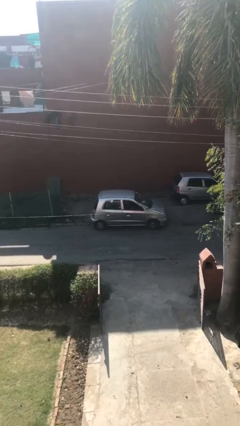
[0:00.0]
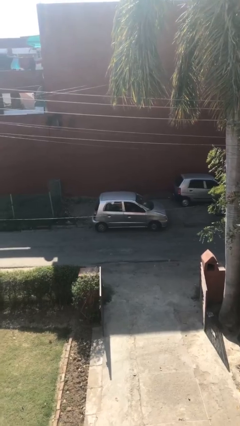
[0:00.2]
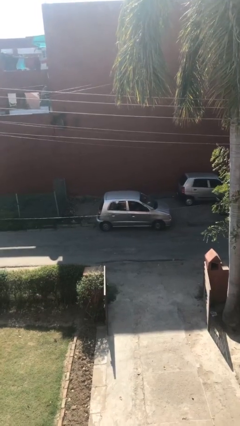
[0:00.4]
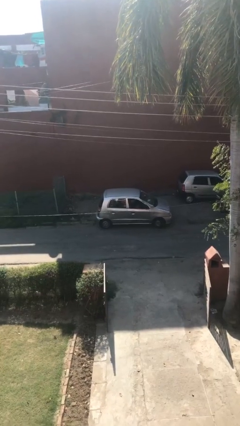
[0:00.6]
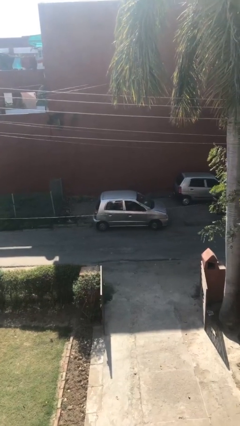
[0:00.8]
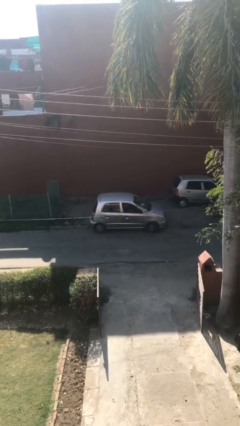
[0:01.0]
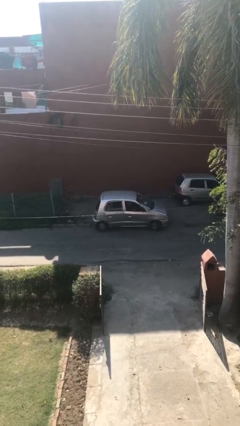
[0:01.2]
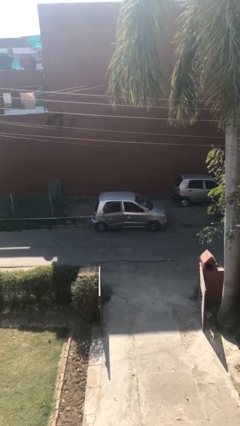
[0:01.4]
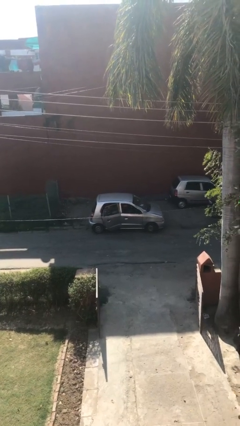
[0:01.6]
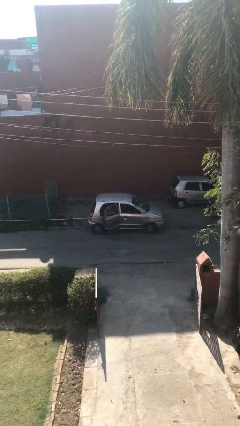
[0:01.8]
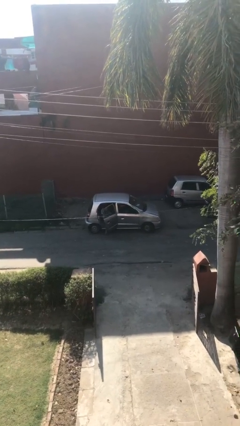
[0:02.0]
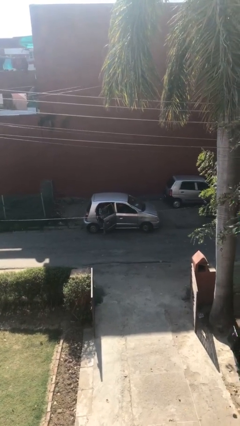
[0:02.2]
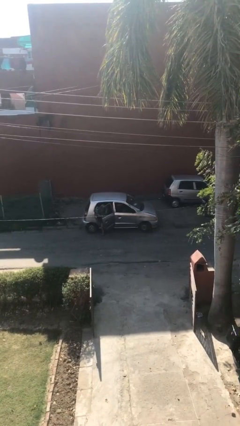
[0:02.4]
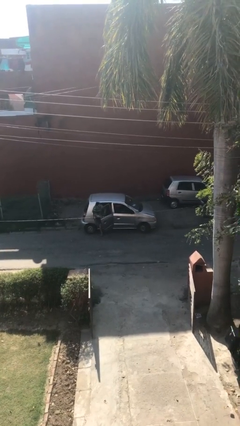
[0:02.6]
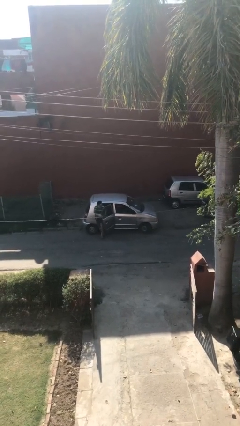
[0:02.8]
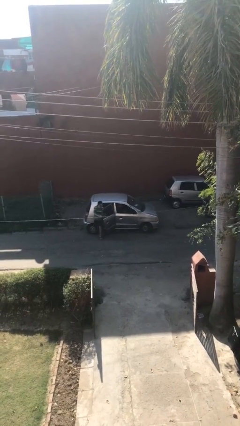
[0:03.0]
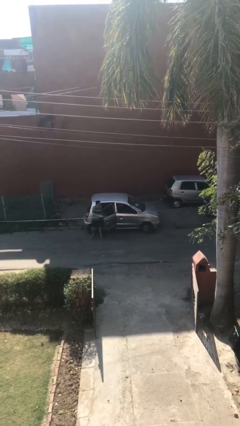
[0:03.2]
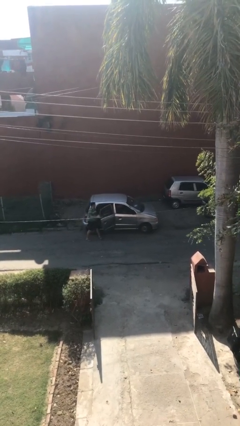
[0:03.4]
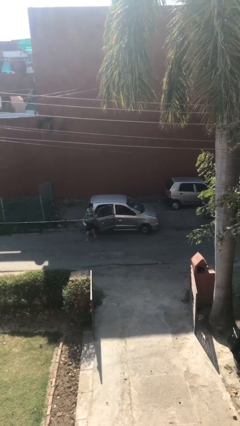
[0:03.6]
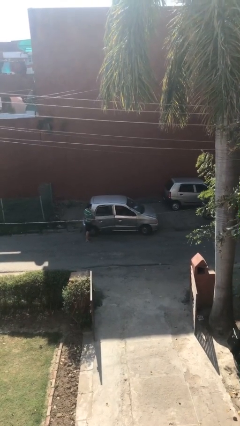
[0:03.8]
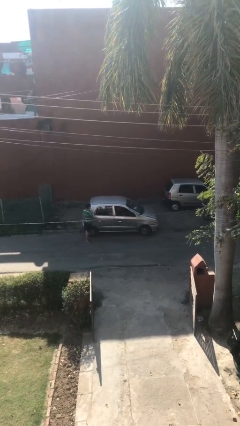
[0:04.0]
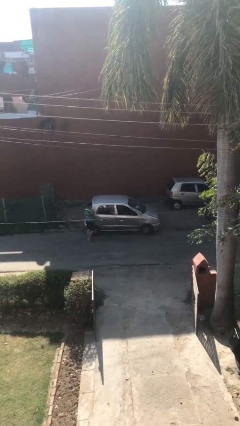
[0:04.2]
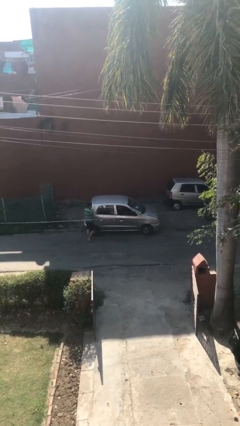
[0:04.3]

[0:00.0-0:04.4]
car drops off person

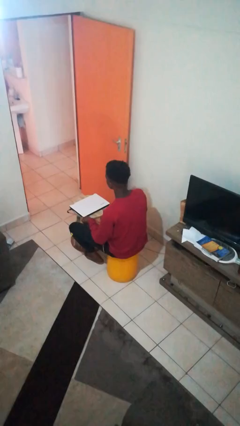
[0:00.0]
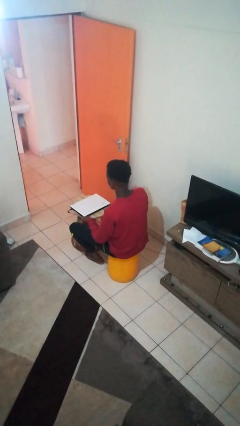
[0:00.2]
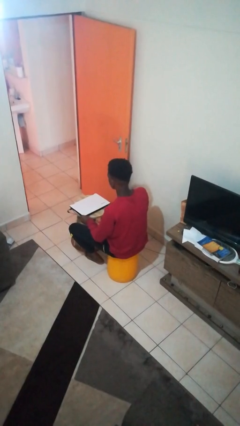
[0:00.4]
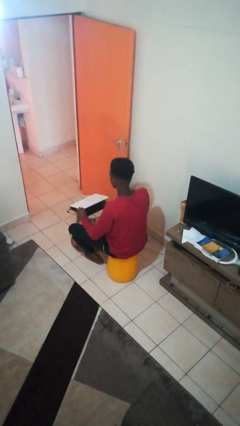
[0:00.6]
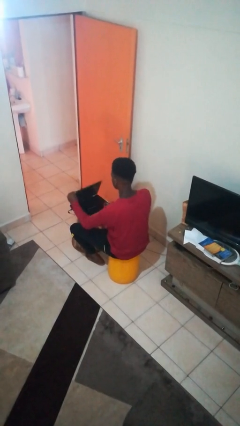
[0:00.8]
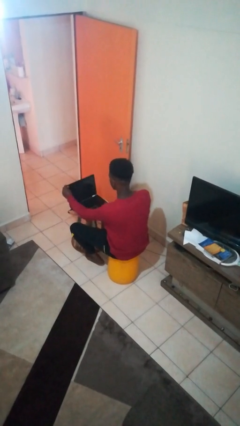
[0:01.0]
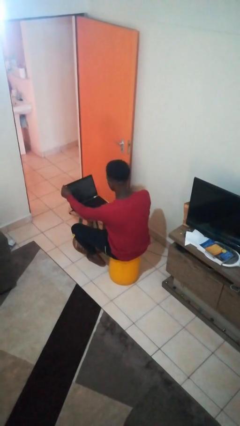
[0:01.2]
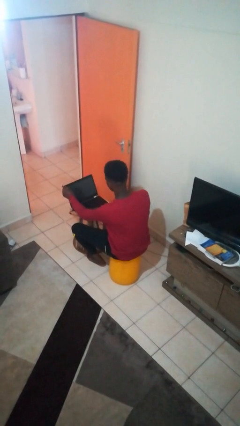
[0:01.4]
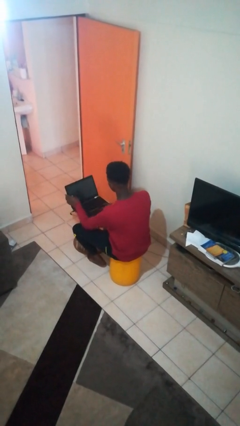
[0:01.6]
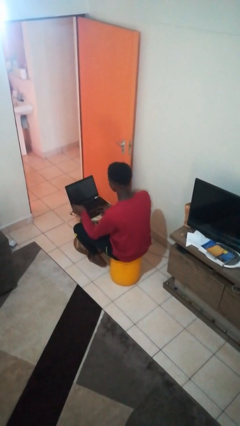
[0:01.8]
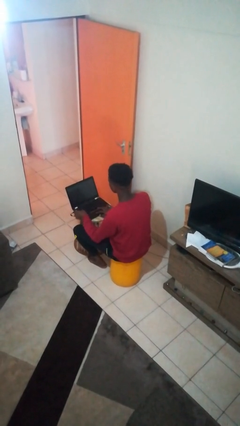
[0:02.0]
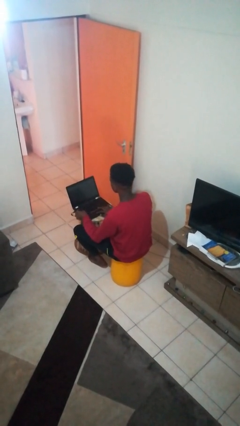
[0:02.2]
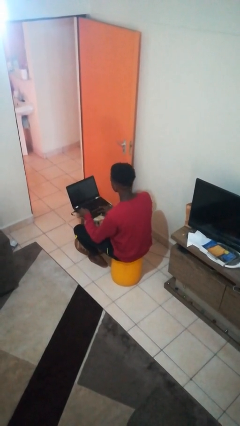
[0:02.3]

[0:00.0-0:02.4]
person opens laptop

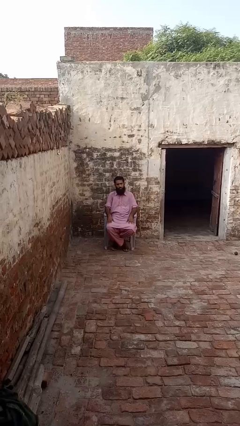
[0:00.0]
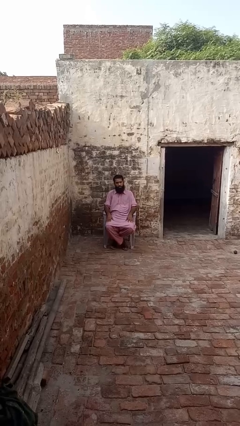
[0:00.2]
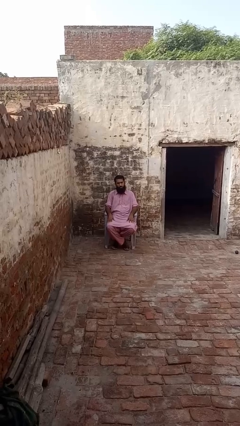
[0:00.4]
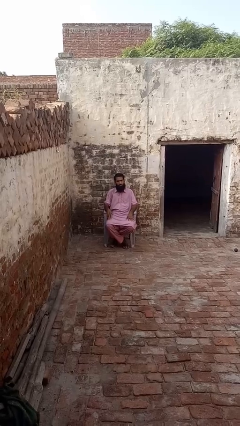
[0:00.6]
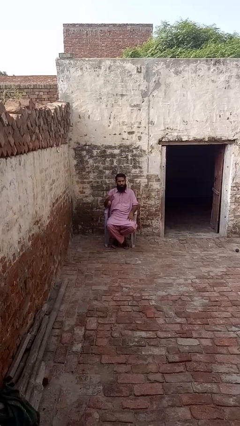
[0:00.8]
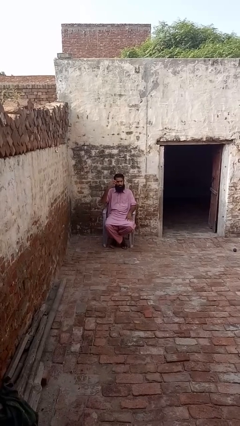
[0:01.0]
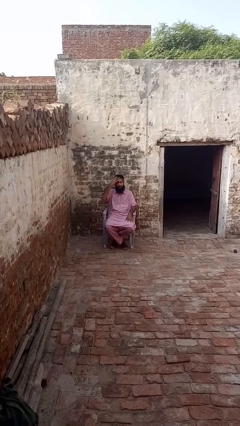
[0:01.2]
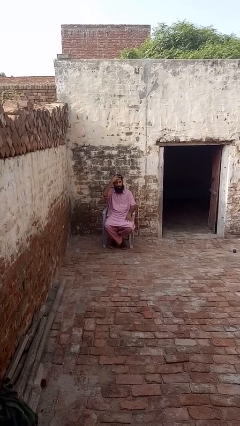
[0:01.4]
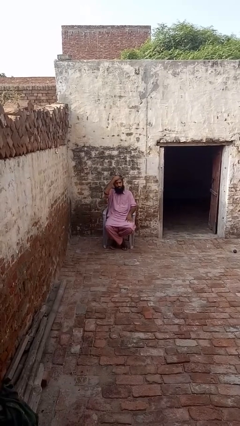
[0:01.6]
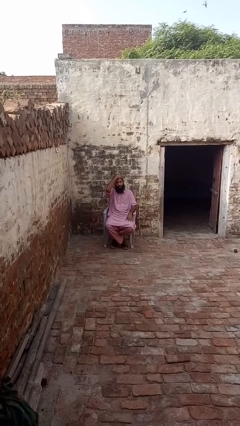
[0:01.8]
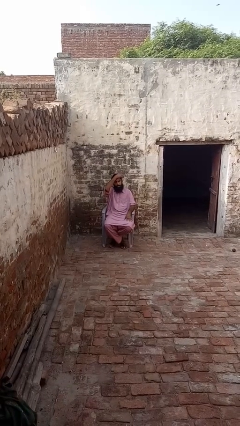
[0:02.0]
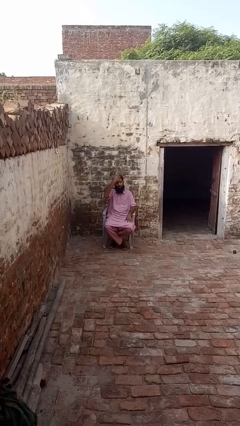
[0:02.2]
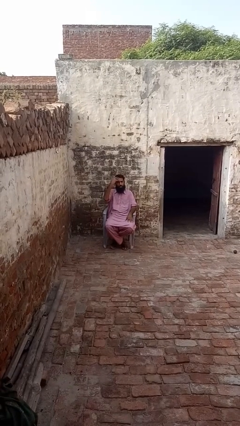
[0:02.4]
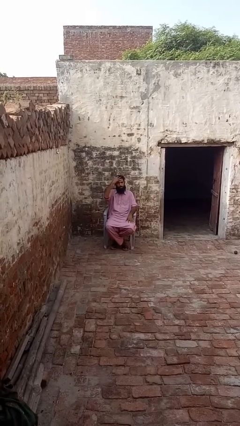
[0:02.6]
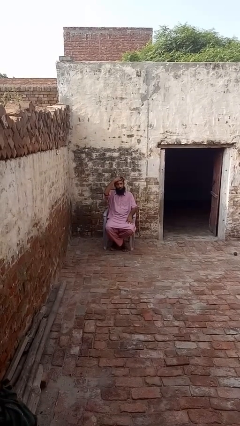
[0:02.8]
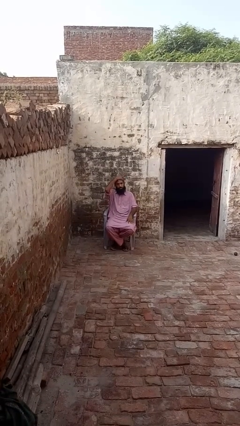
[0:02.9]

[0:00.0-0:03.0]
person strokes hair

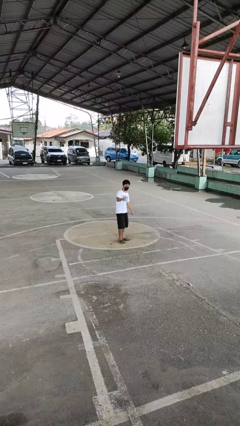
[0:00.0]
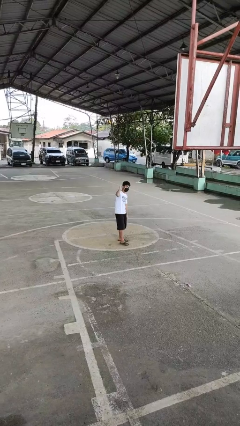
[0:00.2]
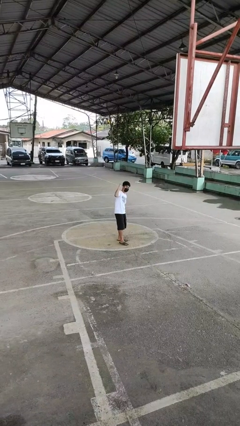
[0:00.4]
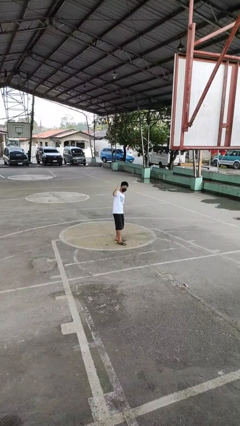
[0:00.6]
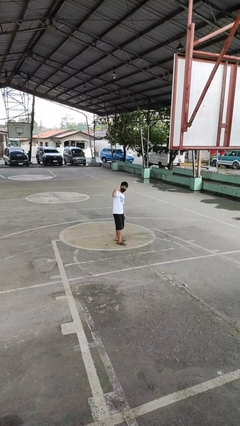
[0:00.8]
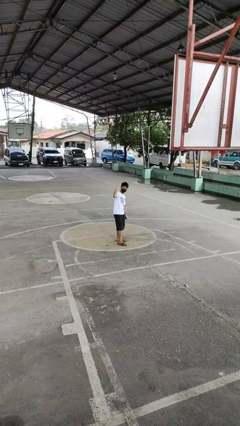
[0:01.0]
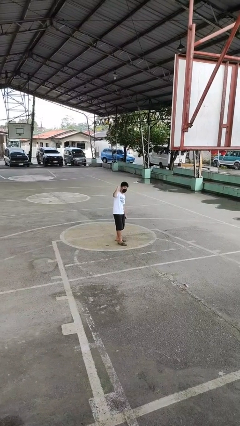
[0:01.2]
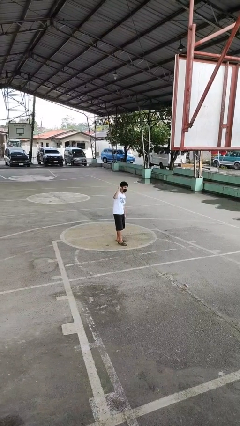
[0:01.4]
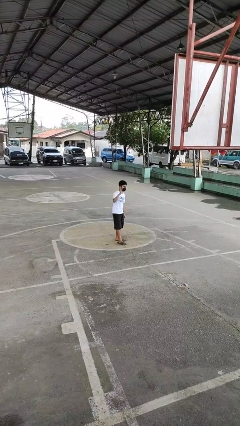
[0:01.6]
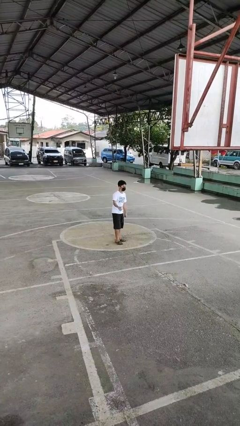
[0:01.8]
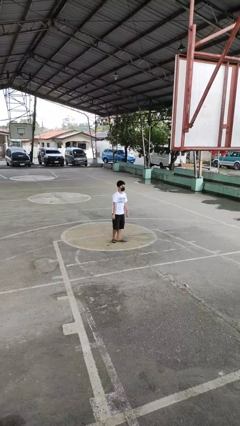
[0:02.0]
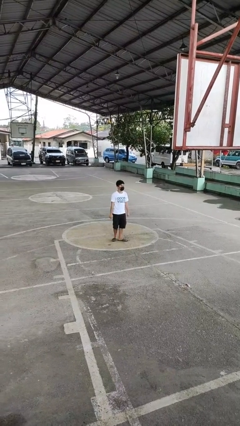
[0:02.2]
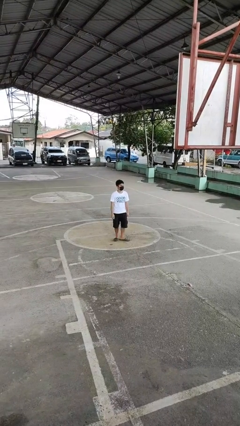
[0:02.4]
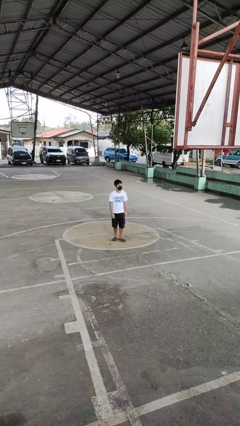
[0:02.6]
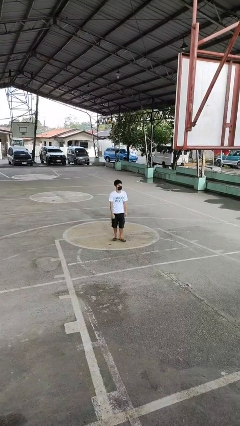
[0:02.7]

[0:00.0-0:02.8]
person gestures behind me

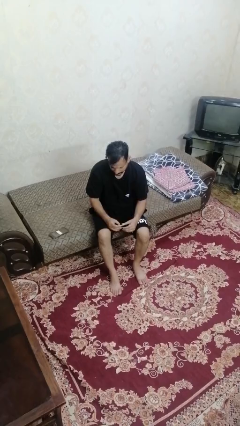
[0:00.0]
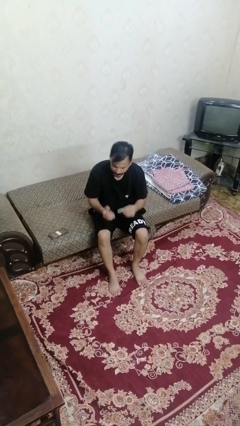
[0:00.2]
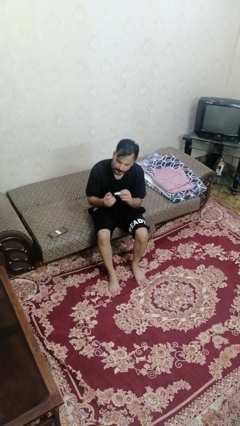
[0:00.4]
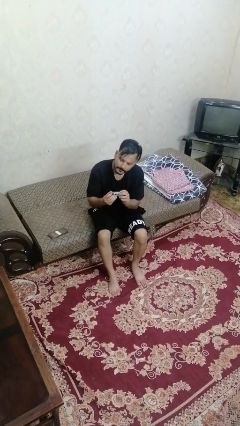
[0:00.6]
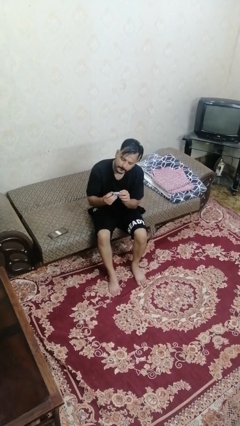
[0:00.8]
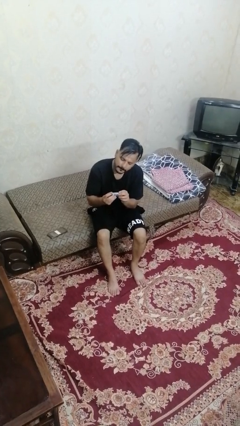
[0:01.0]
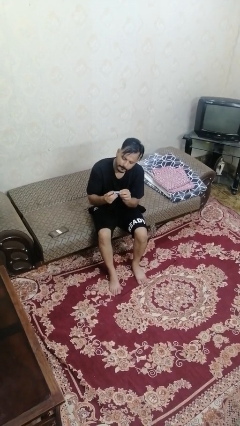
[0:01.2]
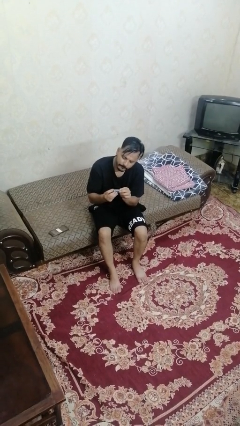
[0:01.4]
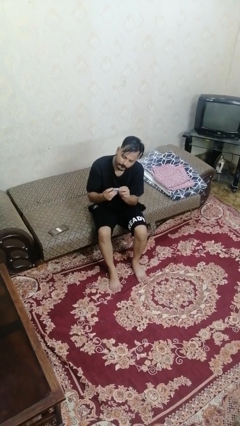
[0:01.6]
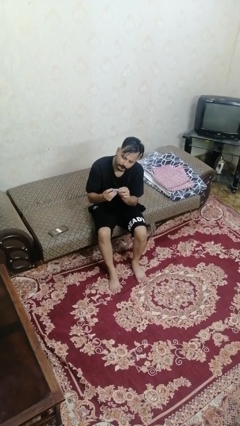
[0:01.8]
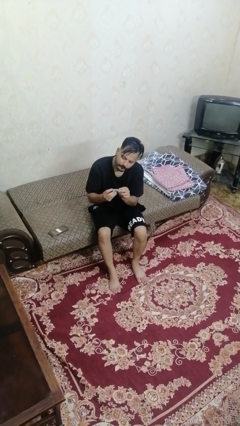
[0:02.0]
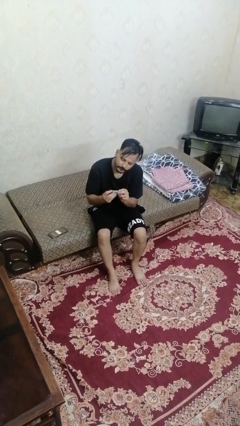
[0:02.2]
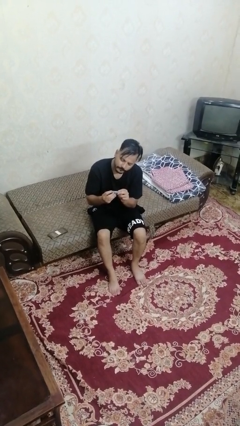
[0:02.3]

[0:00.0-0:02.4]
person clips fingernails

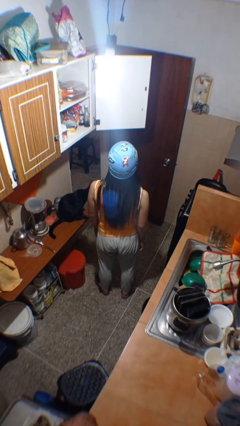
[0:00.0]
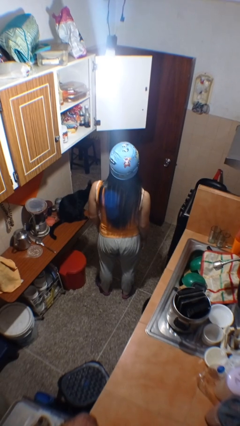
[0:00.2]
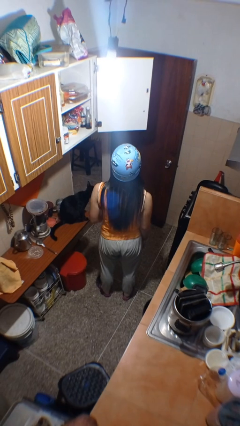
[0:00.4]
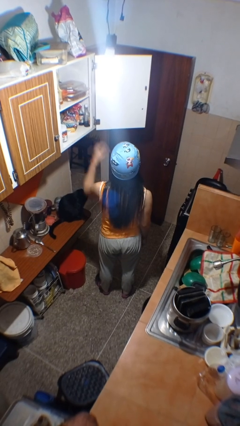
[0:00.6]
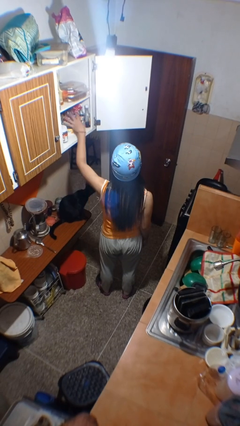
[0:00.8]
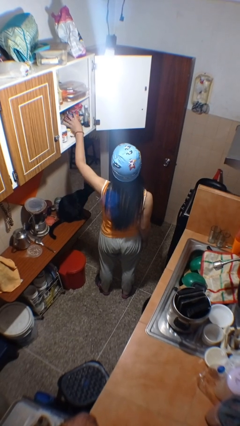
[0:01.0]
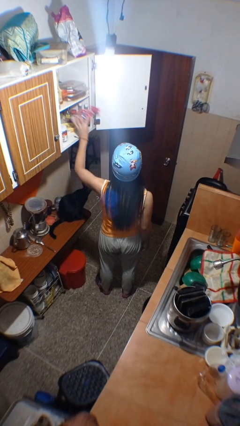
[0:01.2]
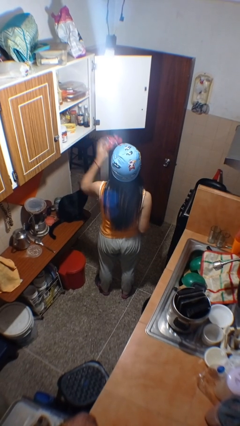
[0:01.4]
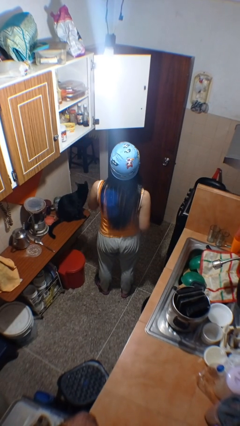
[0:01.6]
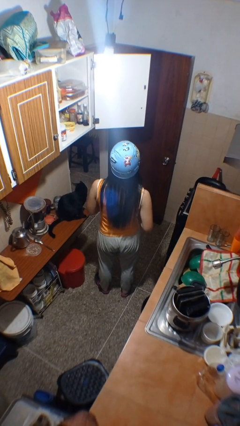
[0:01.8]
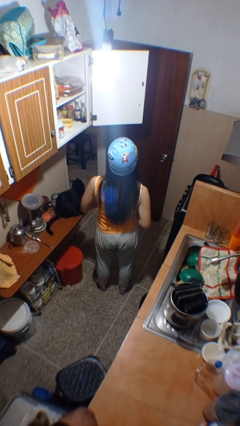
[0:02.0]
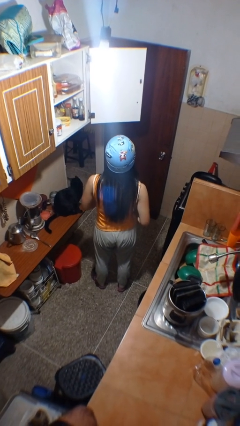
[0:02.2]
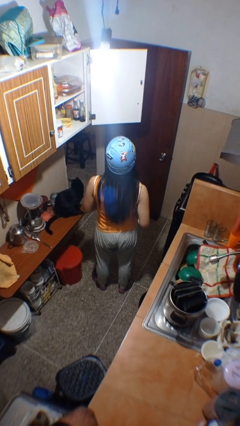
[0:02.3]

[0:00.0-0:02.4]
person picks up object from cabinet
